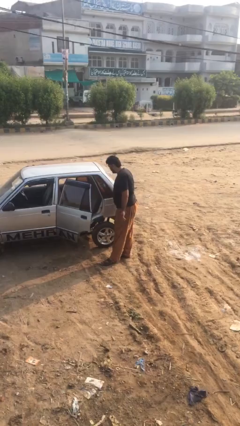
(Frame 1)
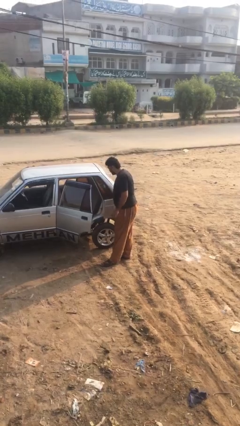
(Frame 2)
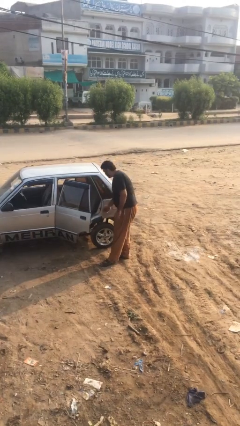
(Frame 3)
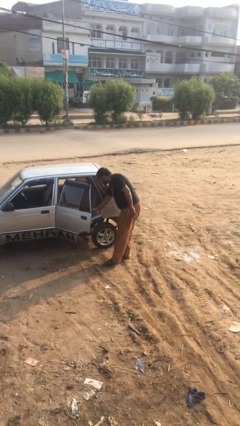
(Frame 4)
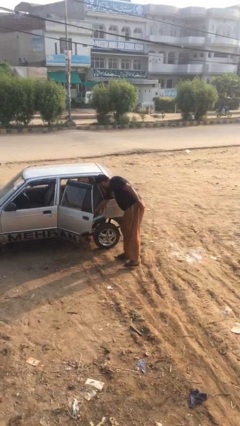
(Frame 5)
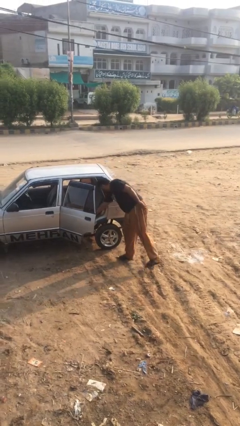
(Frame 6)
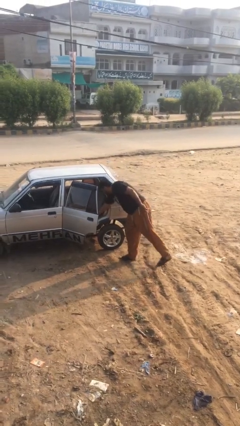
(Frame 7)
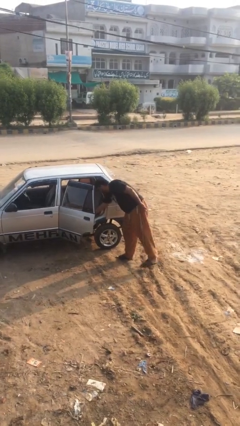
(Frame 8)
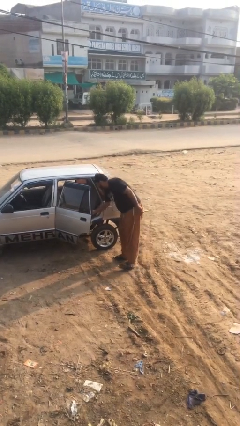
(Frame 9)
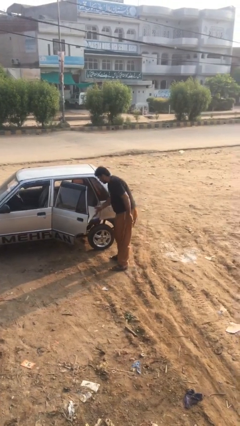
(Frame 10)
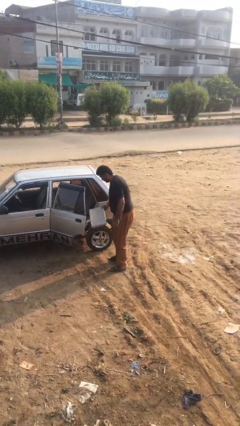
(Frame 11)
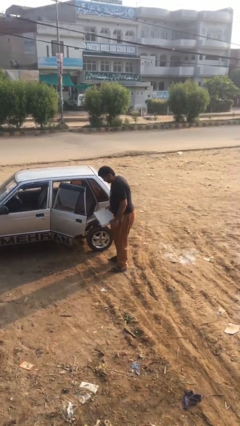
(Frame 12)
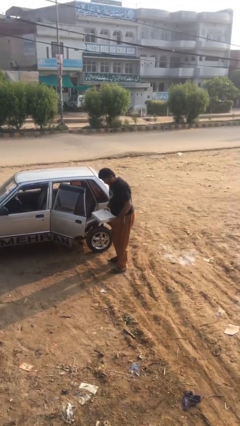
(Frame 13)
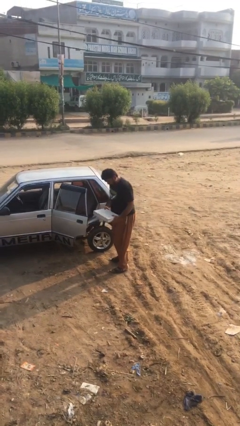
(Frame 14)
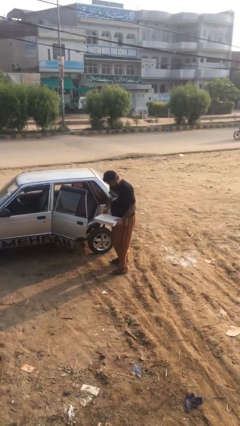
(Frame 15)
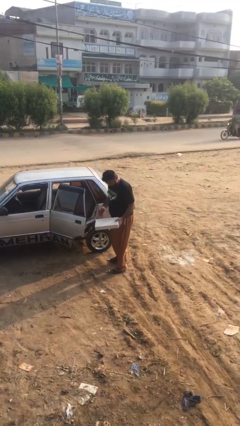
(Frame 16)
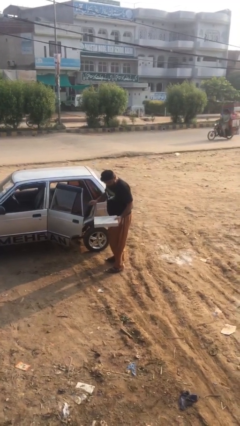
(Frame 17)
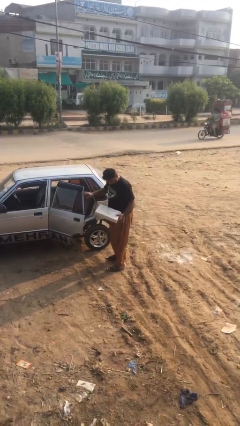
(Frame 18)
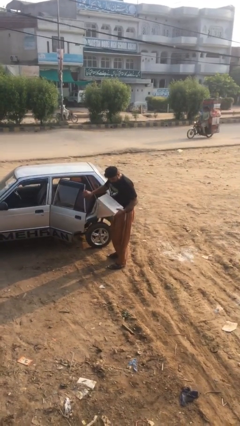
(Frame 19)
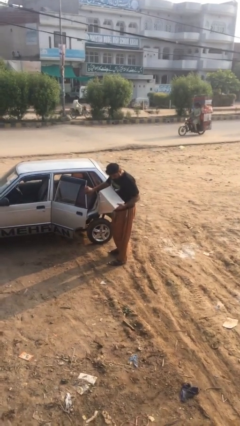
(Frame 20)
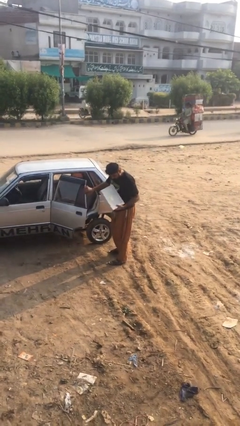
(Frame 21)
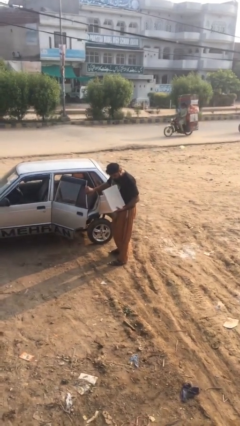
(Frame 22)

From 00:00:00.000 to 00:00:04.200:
person unloads car

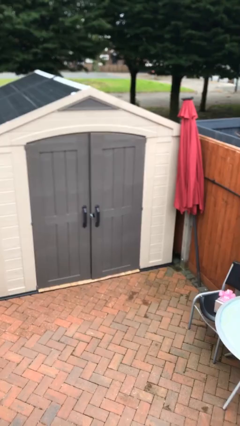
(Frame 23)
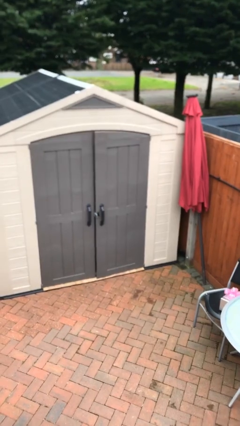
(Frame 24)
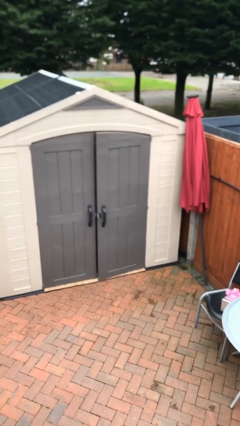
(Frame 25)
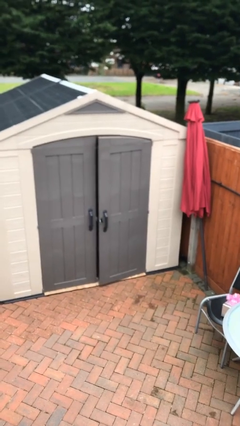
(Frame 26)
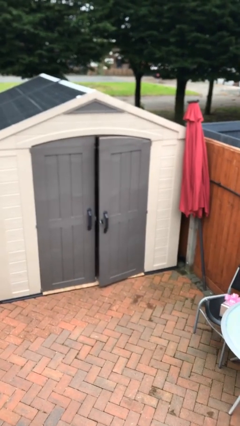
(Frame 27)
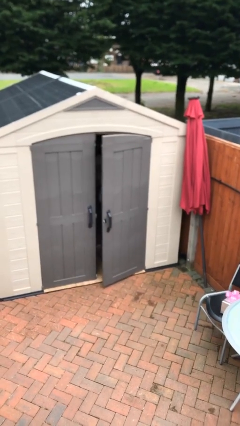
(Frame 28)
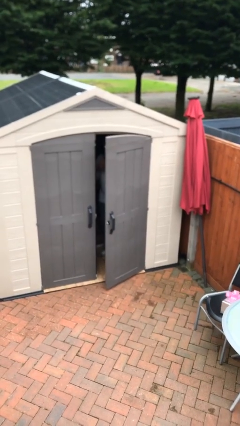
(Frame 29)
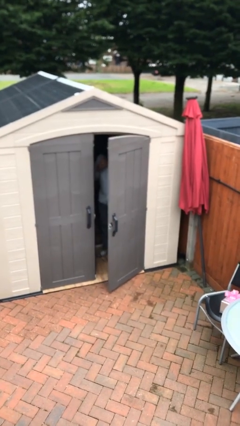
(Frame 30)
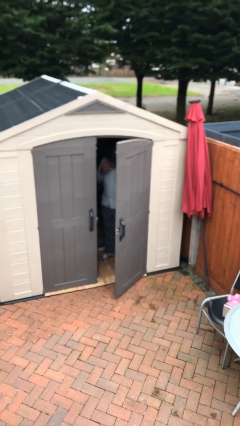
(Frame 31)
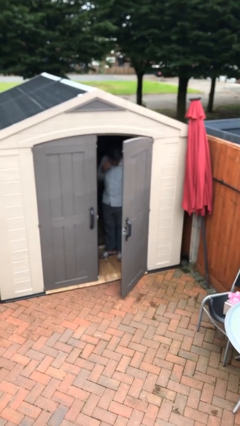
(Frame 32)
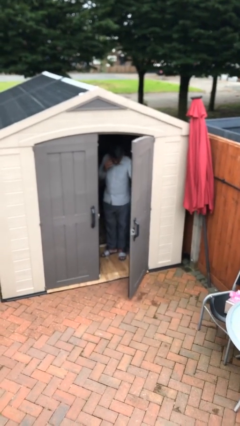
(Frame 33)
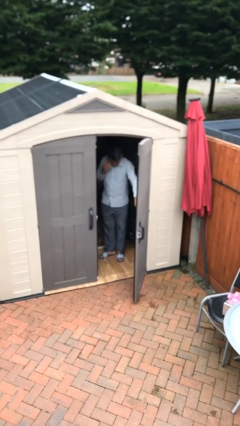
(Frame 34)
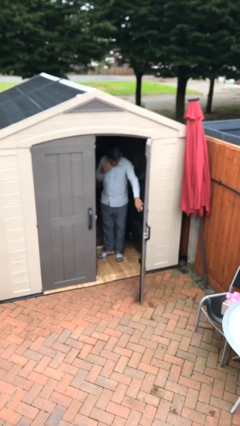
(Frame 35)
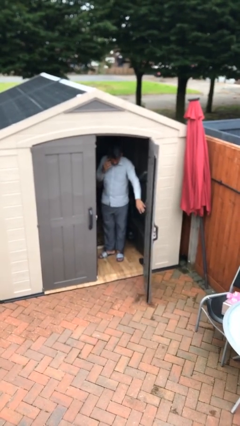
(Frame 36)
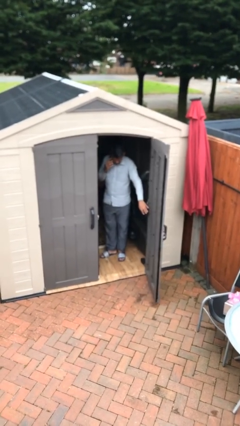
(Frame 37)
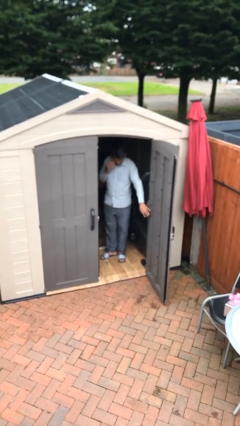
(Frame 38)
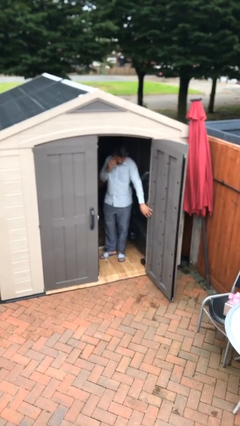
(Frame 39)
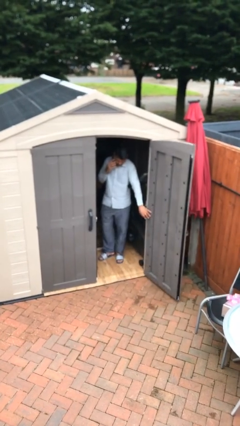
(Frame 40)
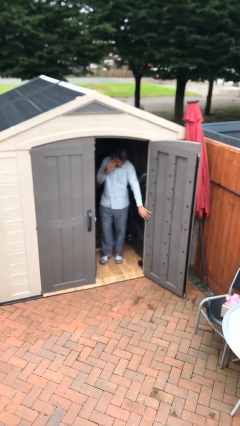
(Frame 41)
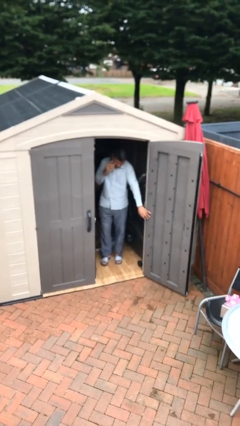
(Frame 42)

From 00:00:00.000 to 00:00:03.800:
person opens facility door

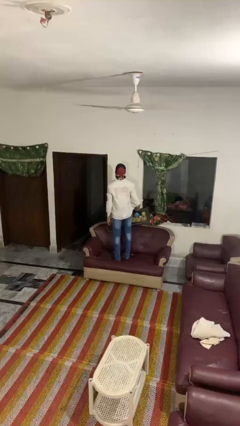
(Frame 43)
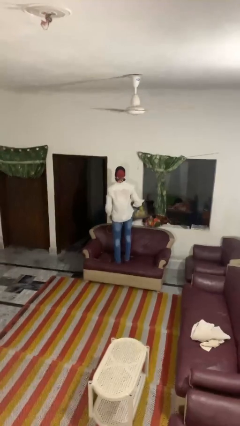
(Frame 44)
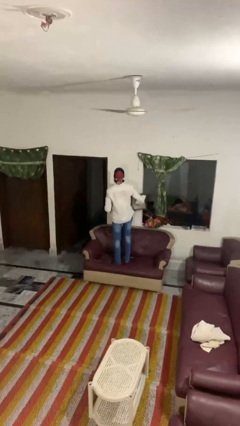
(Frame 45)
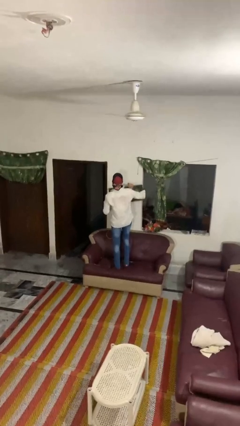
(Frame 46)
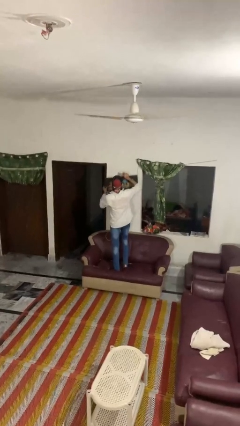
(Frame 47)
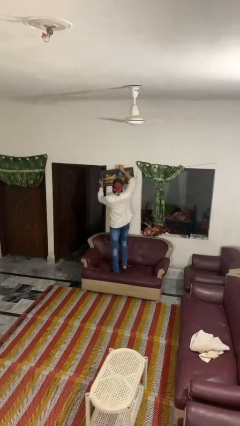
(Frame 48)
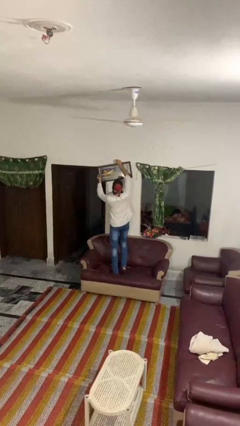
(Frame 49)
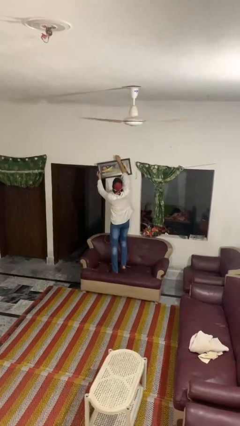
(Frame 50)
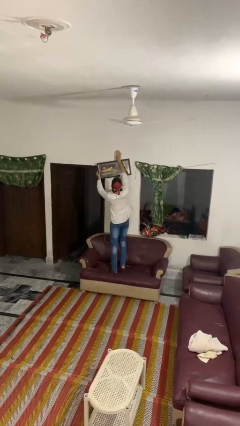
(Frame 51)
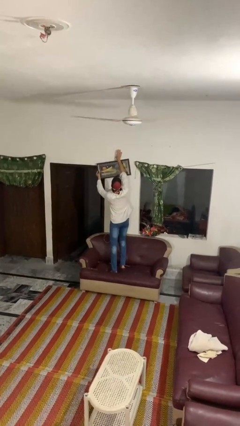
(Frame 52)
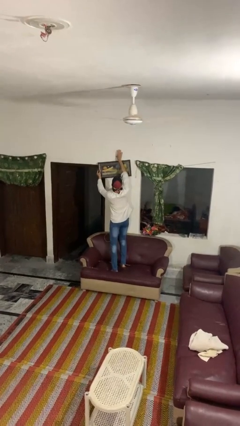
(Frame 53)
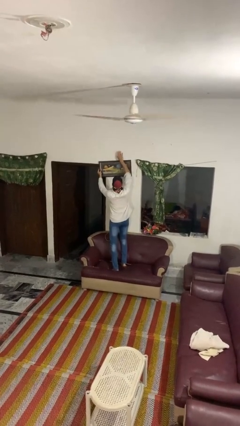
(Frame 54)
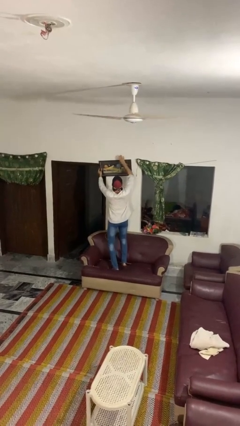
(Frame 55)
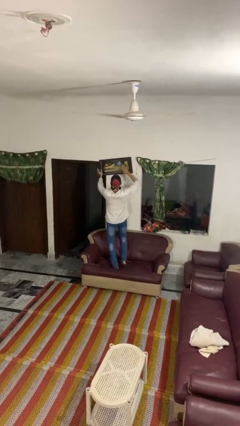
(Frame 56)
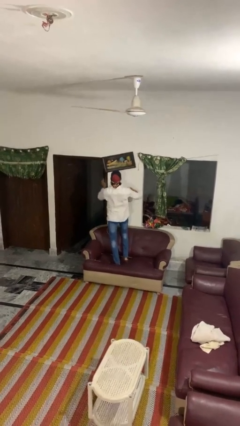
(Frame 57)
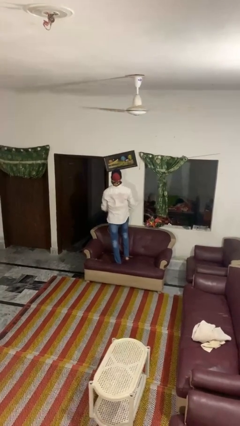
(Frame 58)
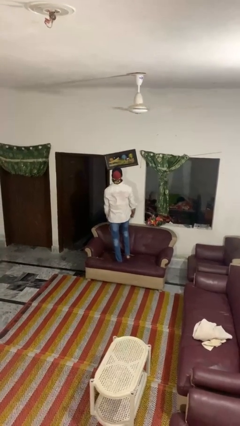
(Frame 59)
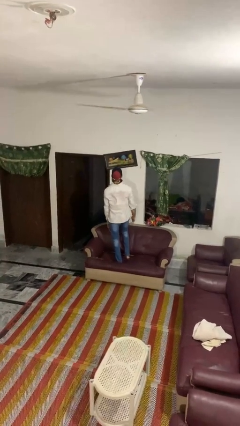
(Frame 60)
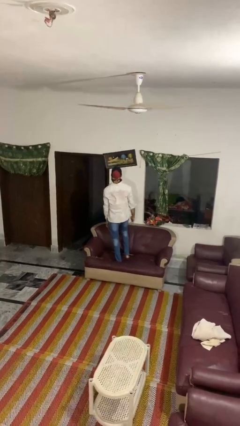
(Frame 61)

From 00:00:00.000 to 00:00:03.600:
person puts up picture frame

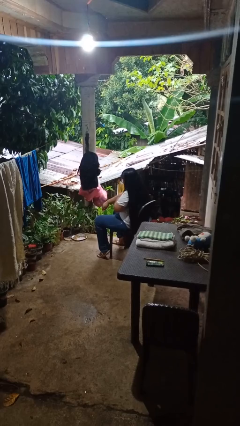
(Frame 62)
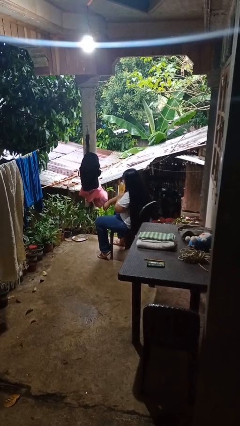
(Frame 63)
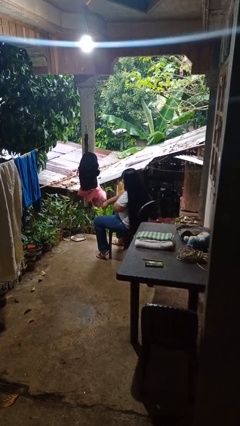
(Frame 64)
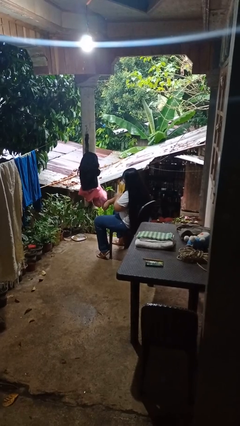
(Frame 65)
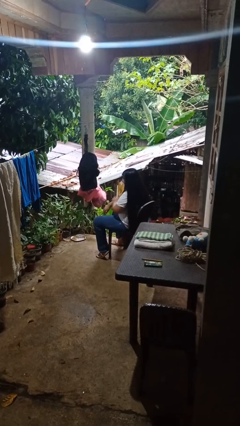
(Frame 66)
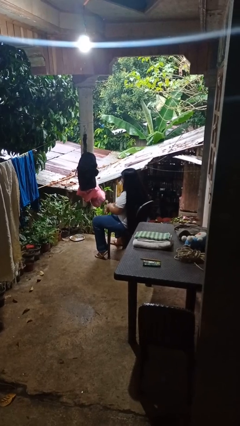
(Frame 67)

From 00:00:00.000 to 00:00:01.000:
person swats bug

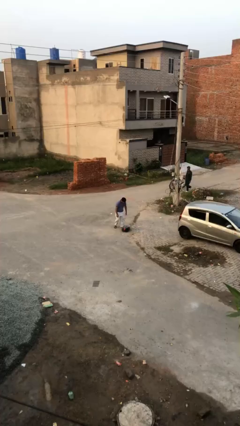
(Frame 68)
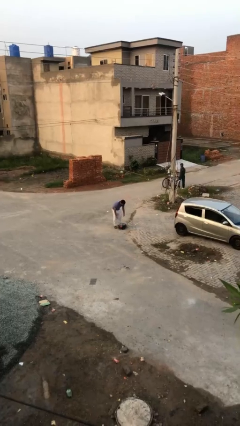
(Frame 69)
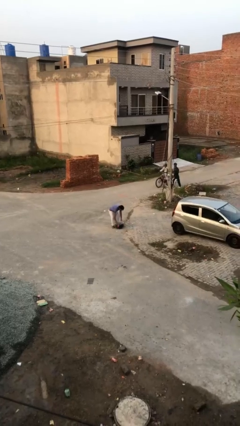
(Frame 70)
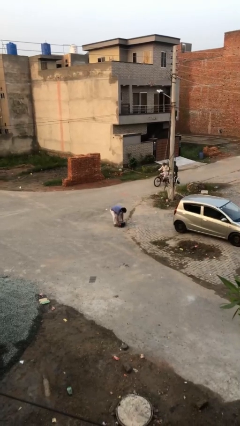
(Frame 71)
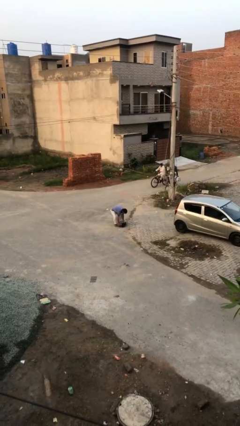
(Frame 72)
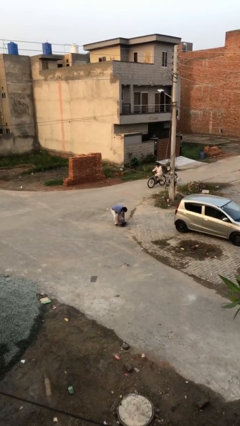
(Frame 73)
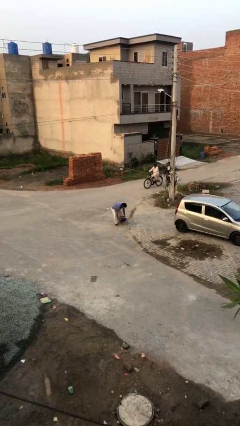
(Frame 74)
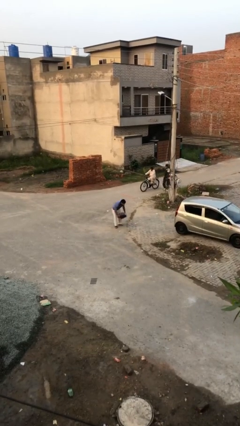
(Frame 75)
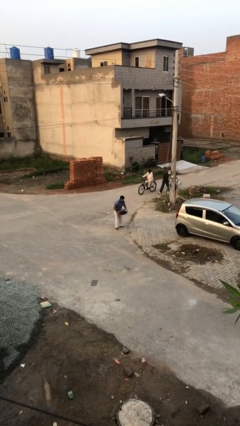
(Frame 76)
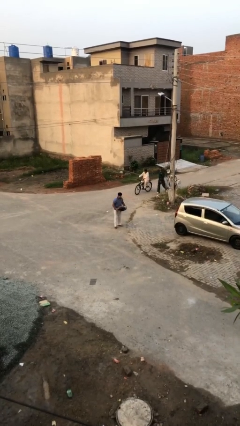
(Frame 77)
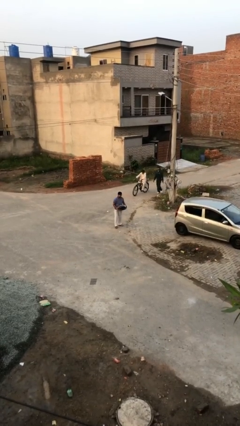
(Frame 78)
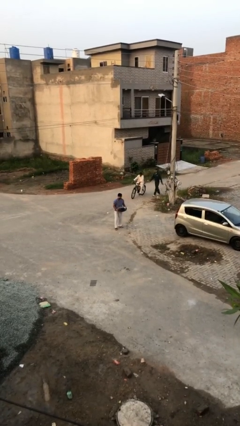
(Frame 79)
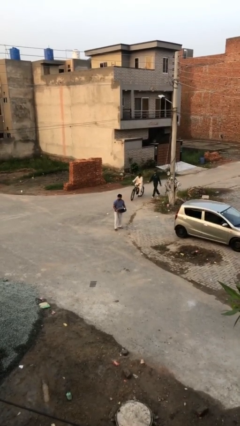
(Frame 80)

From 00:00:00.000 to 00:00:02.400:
person picks up object from floor

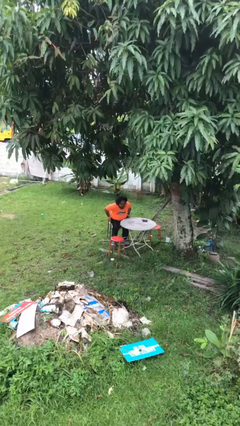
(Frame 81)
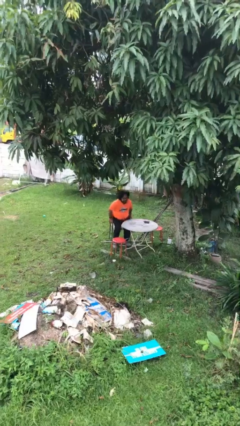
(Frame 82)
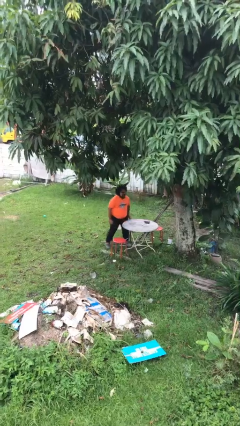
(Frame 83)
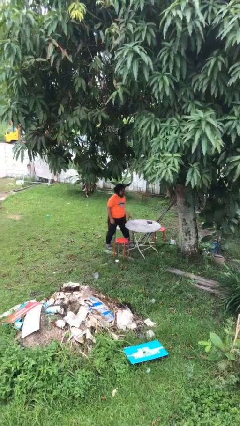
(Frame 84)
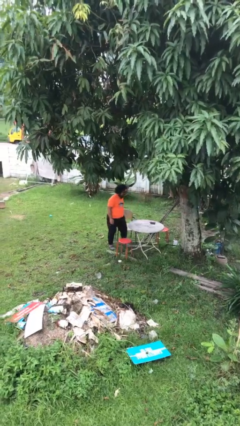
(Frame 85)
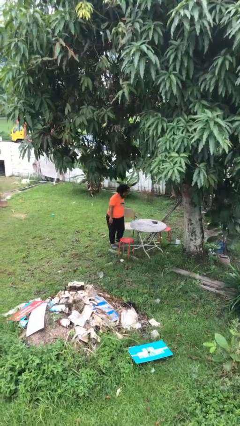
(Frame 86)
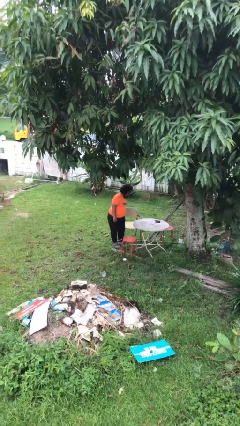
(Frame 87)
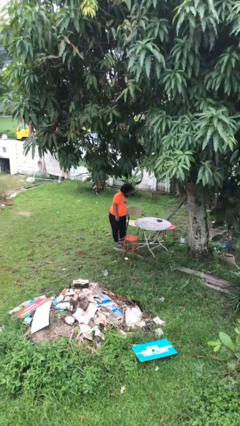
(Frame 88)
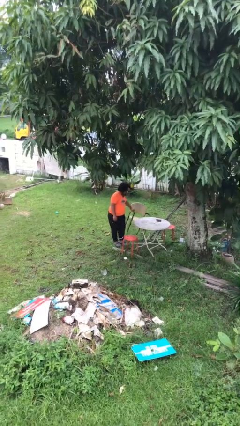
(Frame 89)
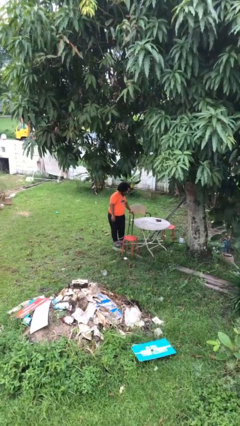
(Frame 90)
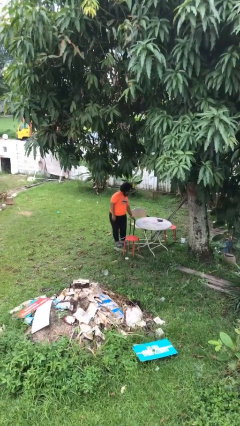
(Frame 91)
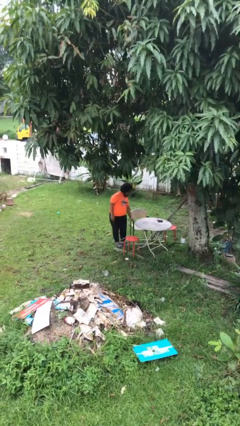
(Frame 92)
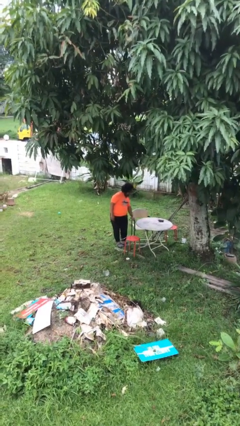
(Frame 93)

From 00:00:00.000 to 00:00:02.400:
person stands up
